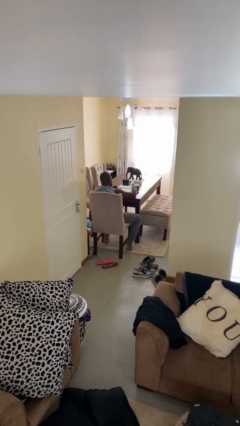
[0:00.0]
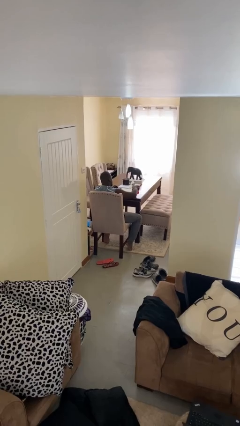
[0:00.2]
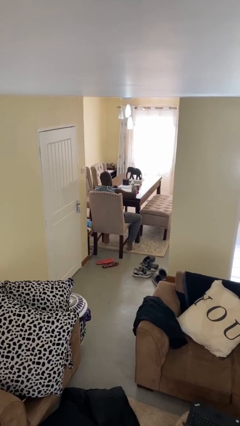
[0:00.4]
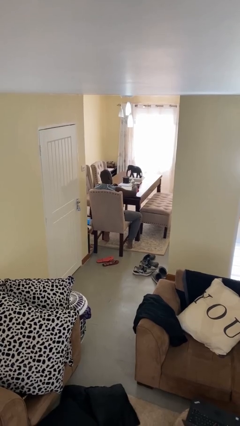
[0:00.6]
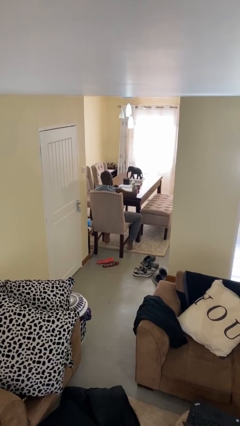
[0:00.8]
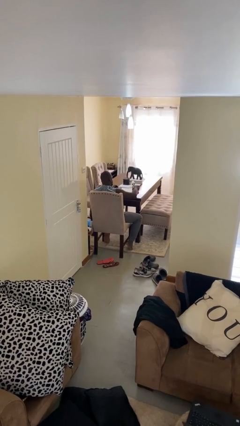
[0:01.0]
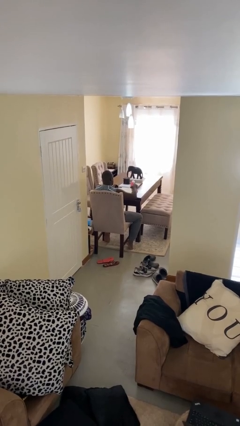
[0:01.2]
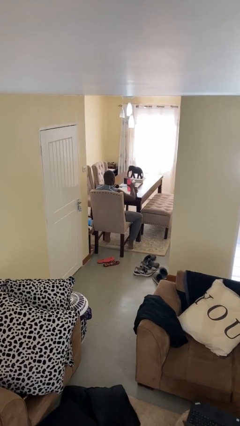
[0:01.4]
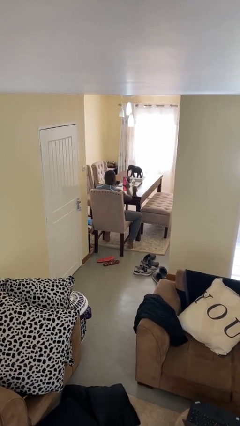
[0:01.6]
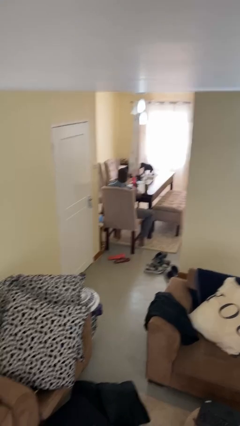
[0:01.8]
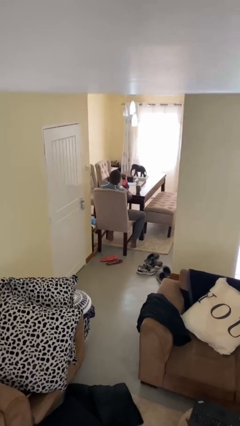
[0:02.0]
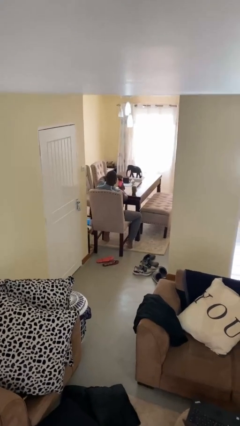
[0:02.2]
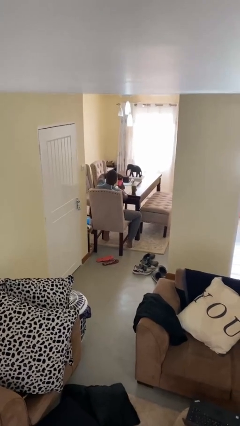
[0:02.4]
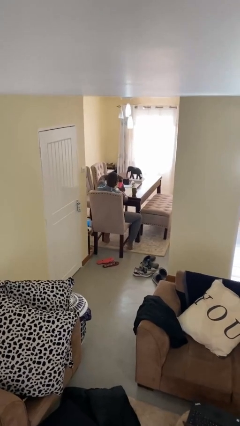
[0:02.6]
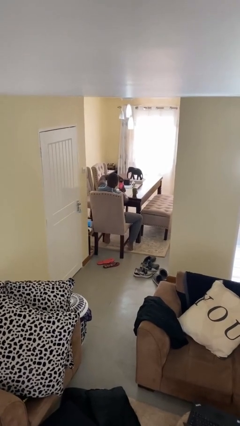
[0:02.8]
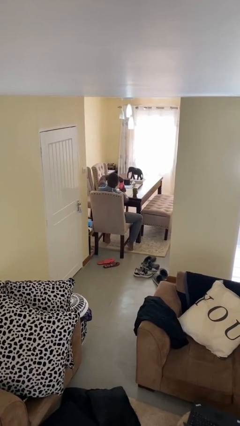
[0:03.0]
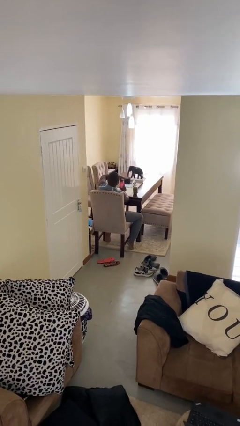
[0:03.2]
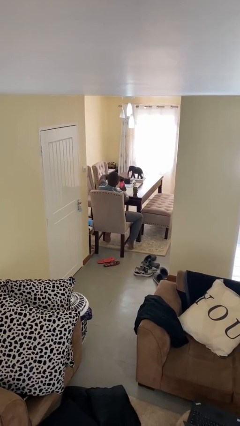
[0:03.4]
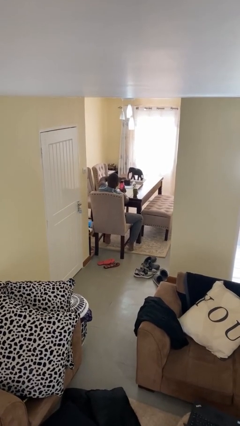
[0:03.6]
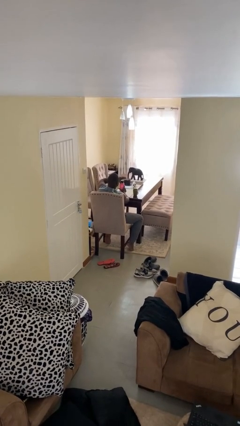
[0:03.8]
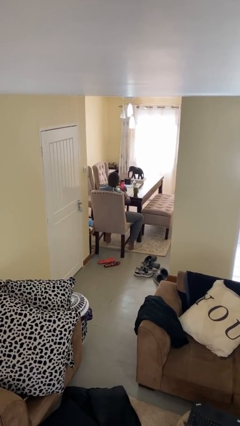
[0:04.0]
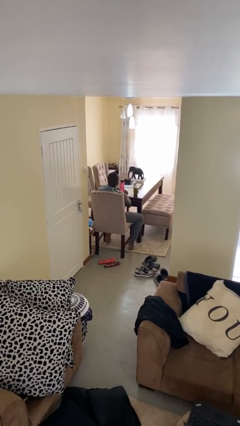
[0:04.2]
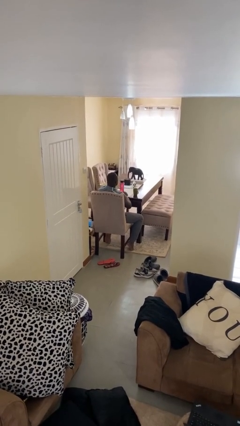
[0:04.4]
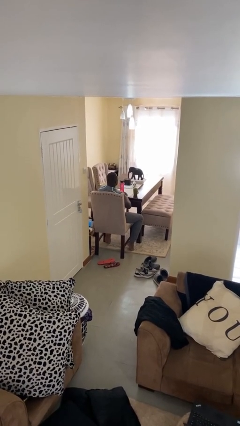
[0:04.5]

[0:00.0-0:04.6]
person screws lid to bottle

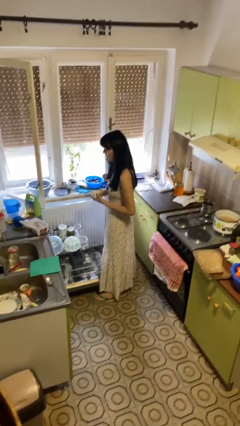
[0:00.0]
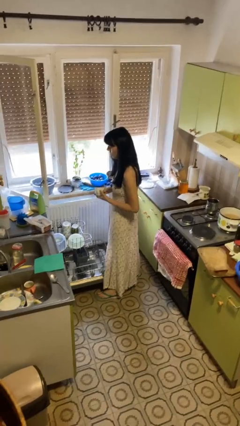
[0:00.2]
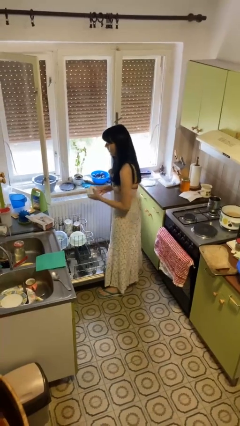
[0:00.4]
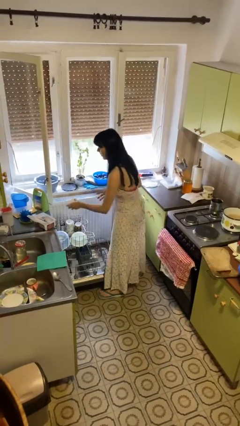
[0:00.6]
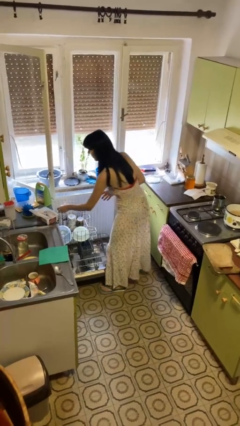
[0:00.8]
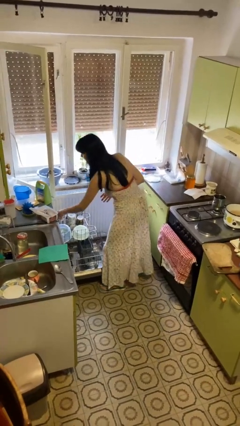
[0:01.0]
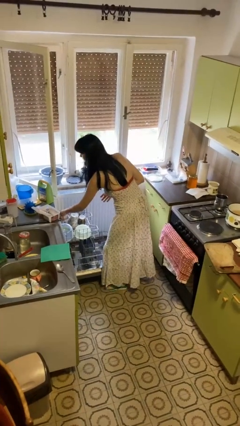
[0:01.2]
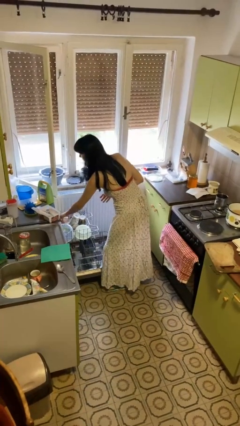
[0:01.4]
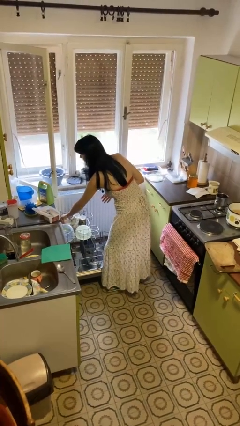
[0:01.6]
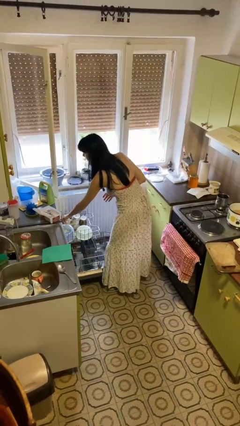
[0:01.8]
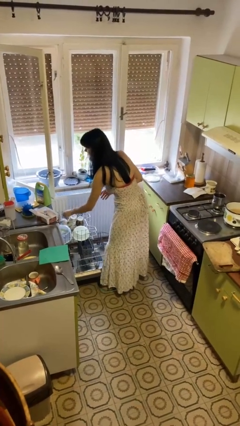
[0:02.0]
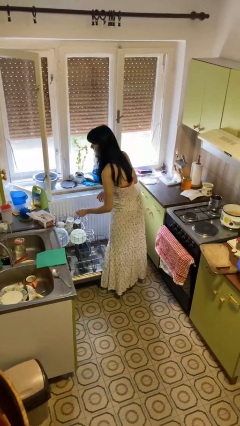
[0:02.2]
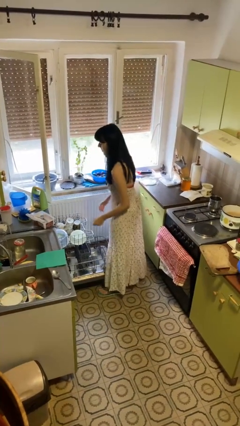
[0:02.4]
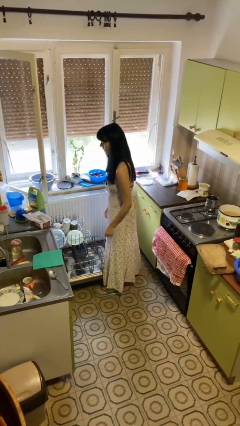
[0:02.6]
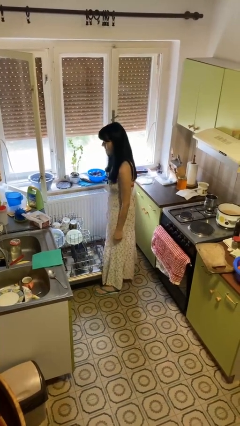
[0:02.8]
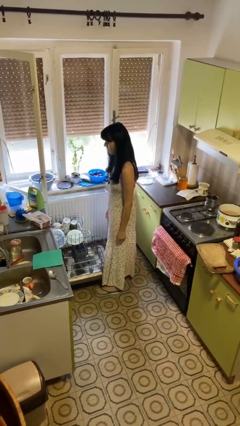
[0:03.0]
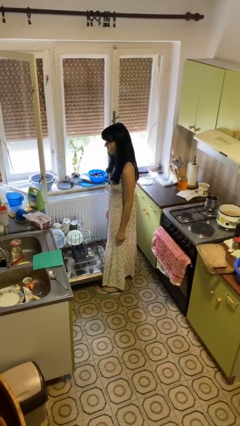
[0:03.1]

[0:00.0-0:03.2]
person loads dishwasher

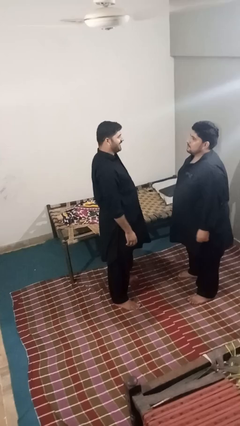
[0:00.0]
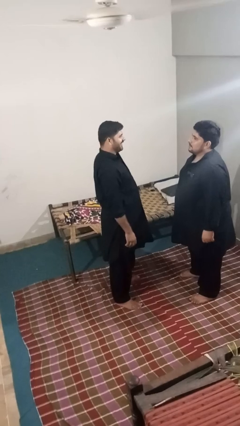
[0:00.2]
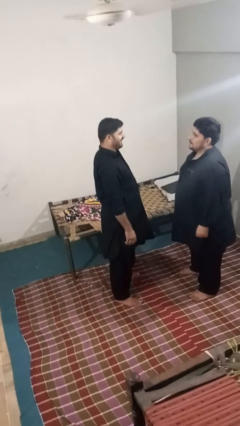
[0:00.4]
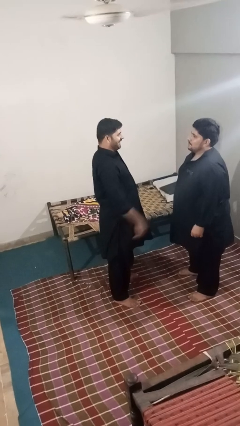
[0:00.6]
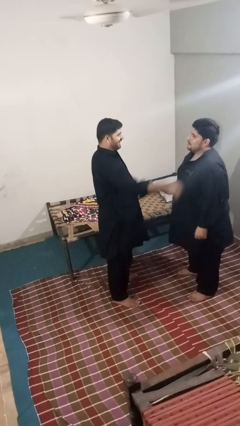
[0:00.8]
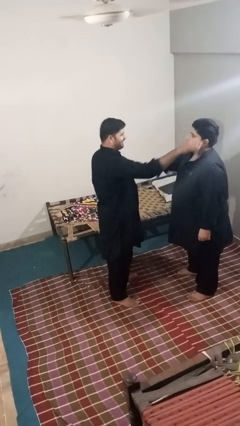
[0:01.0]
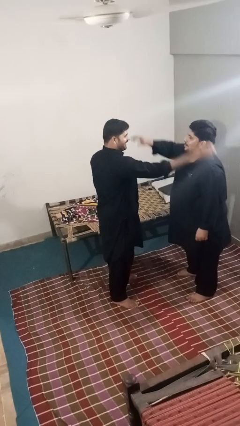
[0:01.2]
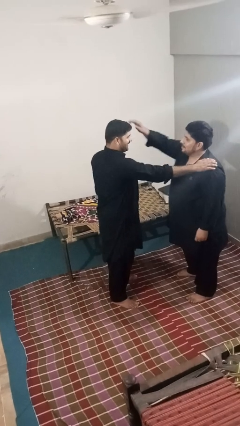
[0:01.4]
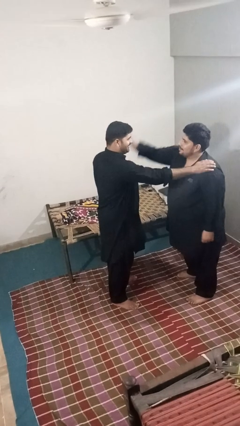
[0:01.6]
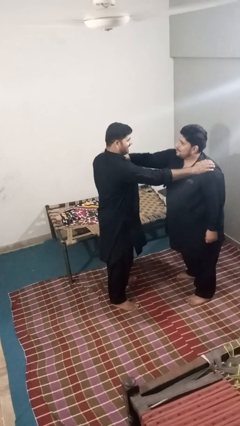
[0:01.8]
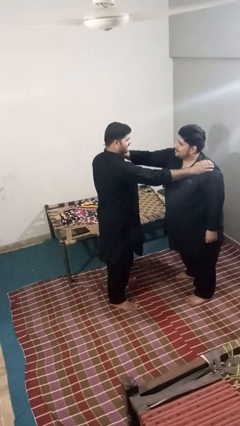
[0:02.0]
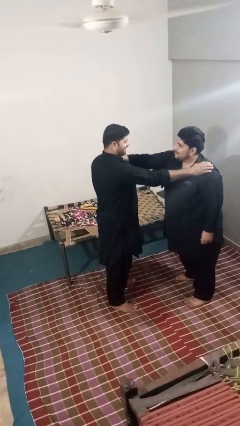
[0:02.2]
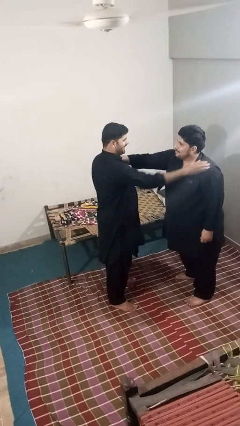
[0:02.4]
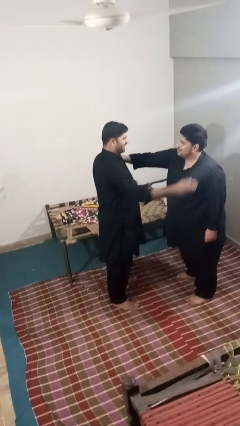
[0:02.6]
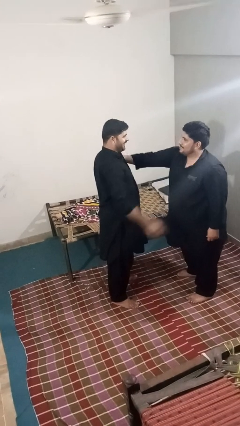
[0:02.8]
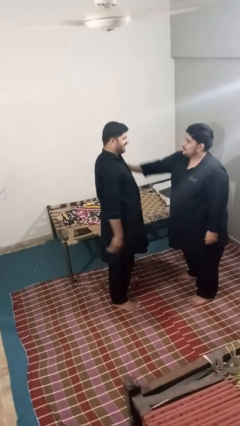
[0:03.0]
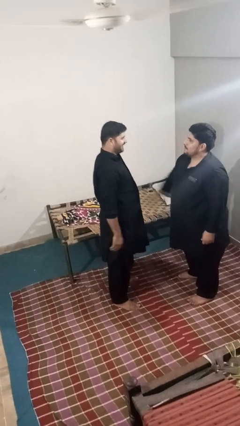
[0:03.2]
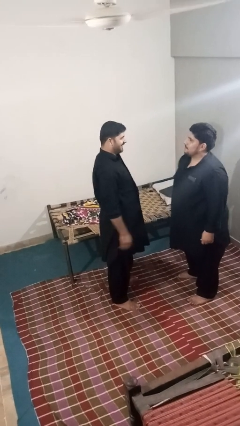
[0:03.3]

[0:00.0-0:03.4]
person pounds shoulders of person

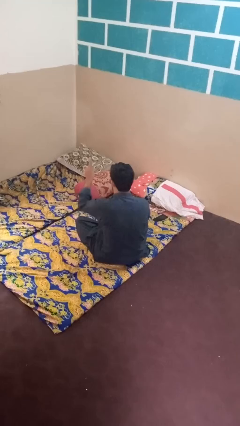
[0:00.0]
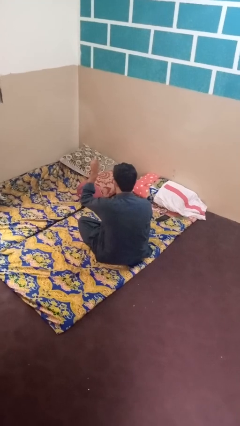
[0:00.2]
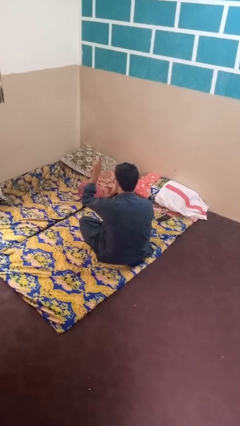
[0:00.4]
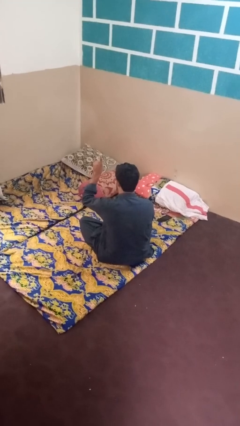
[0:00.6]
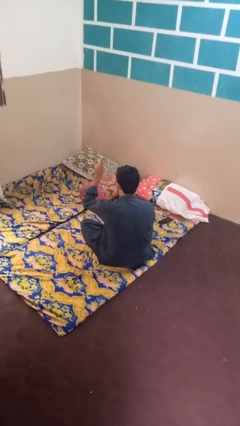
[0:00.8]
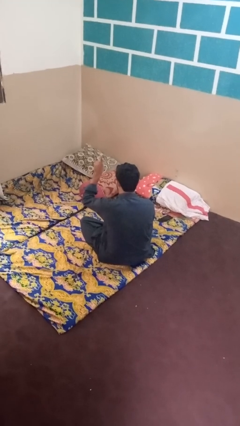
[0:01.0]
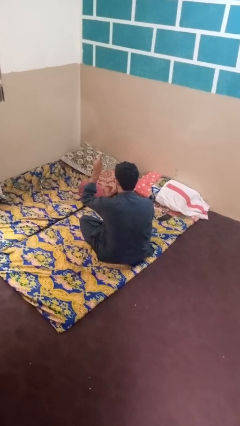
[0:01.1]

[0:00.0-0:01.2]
person gestures hang loose

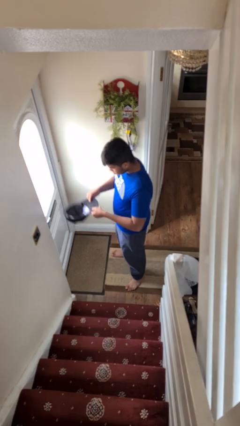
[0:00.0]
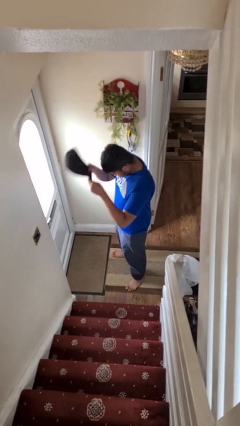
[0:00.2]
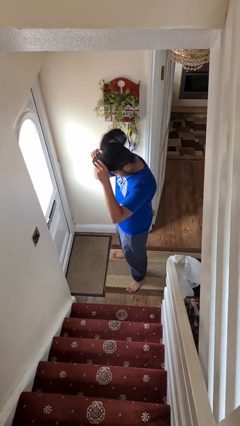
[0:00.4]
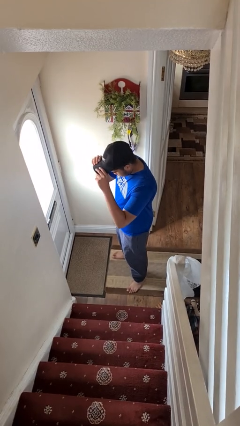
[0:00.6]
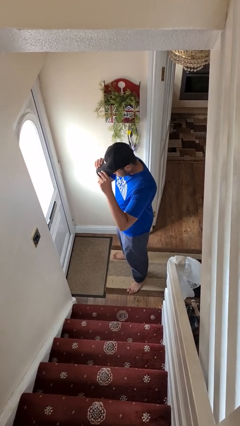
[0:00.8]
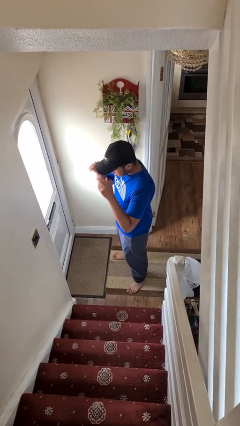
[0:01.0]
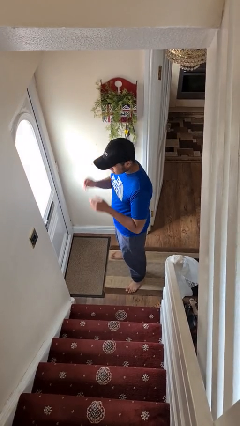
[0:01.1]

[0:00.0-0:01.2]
person puts on hat

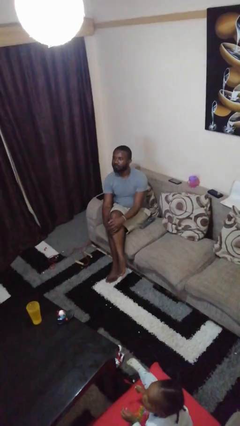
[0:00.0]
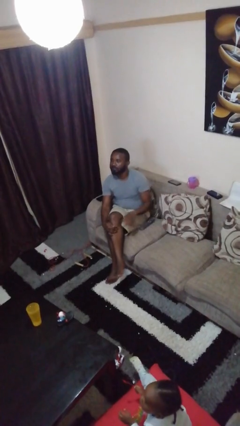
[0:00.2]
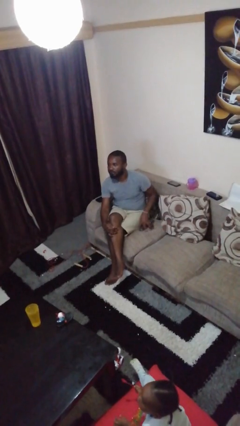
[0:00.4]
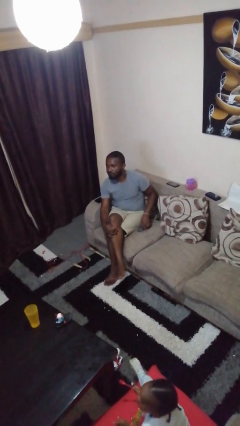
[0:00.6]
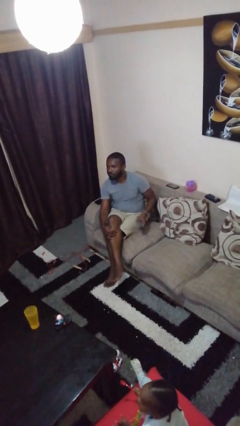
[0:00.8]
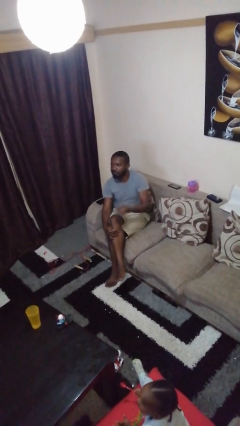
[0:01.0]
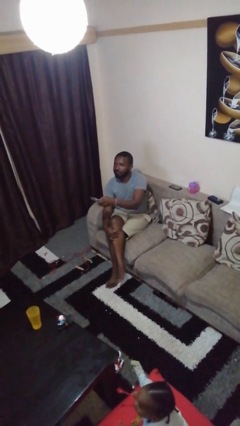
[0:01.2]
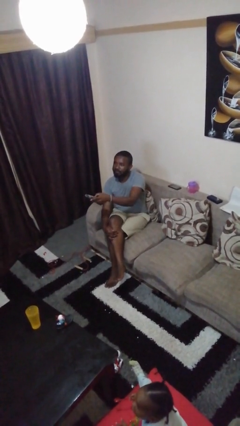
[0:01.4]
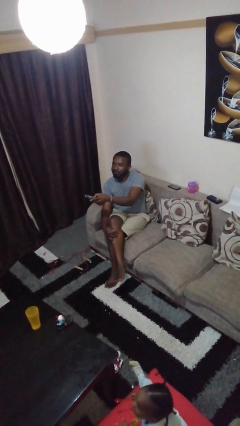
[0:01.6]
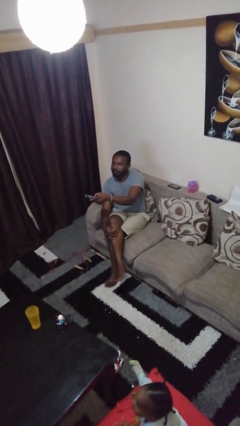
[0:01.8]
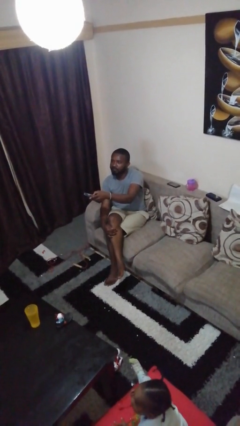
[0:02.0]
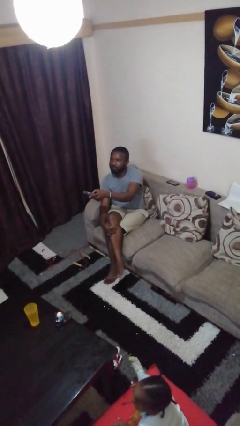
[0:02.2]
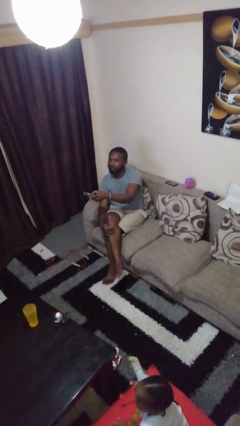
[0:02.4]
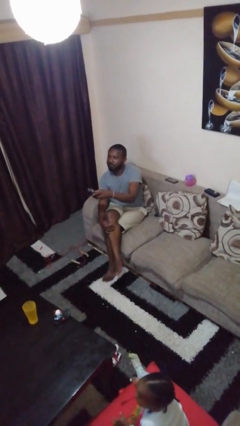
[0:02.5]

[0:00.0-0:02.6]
person uses television remote

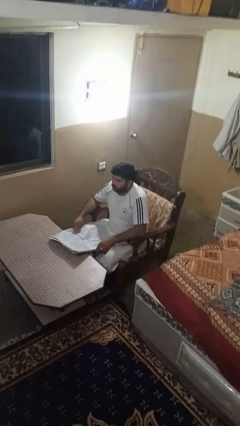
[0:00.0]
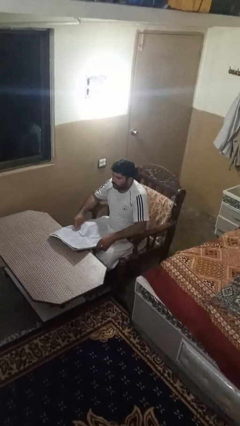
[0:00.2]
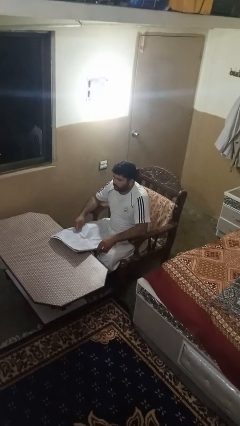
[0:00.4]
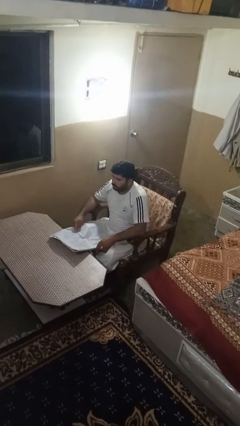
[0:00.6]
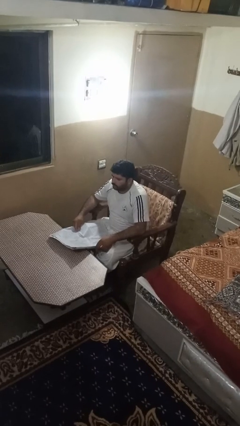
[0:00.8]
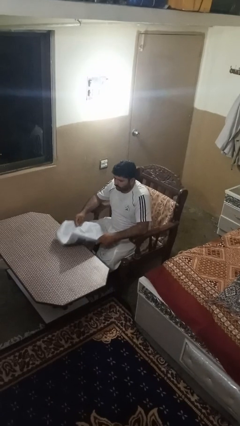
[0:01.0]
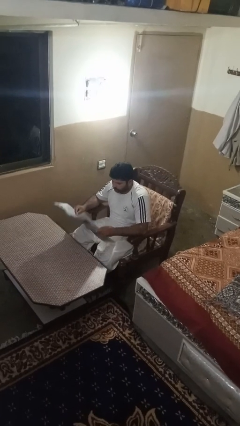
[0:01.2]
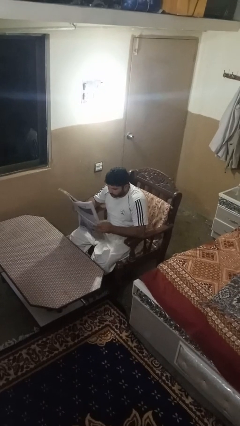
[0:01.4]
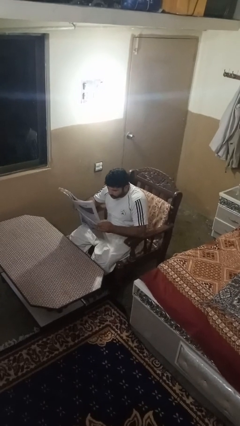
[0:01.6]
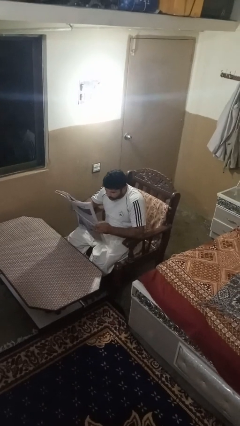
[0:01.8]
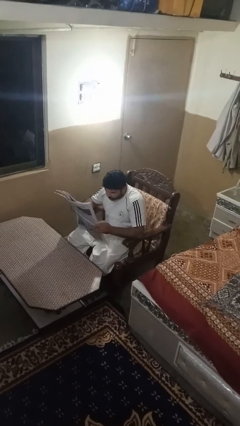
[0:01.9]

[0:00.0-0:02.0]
person reads newspaper
